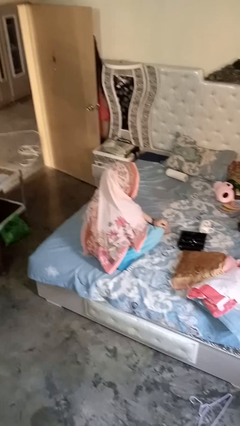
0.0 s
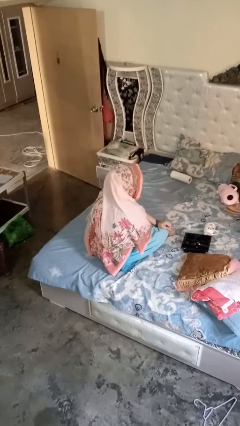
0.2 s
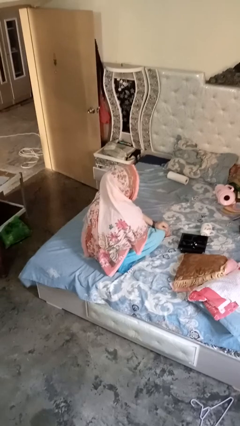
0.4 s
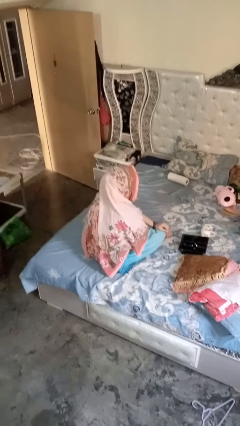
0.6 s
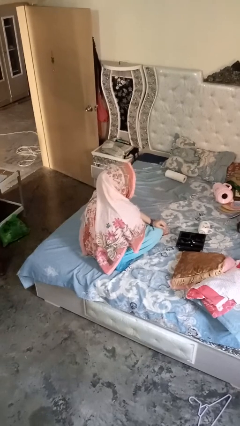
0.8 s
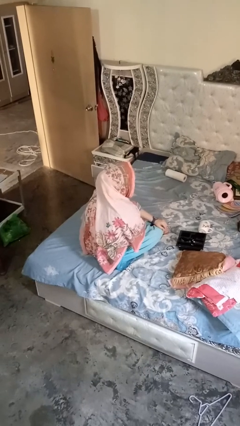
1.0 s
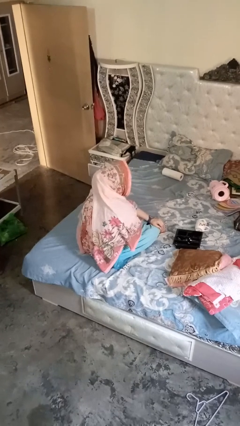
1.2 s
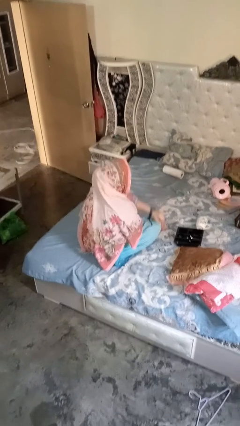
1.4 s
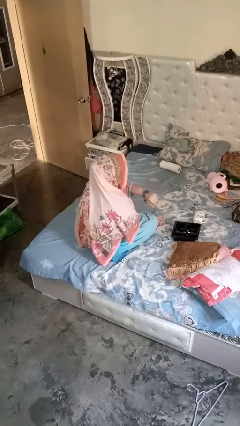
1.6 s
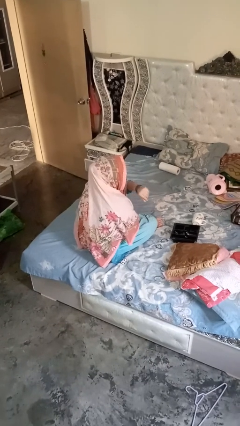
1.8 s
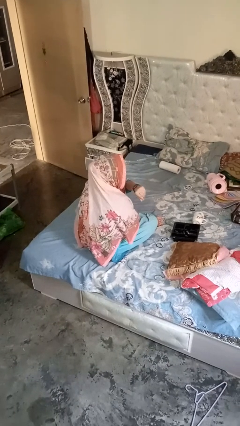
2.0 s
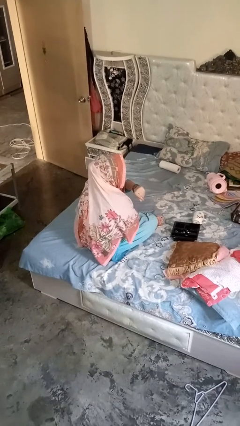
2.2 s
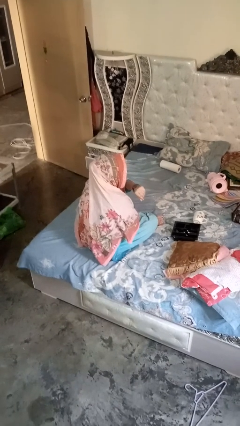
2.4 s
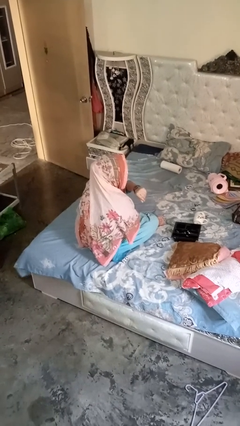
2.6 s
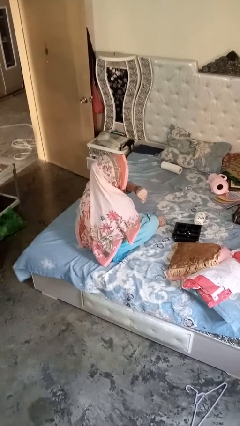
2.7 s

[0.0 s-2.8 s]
person gestures watch closely

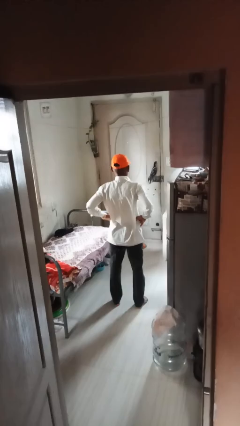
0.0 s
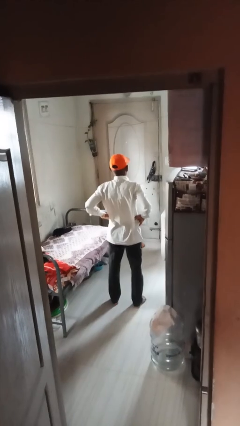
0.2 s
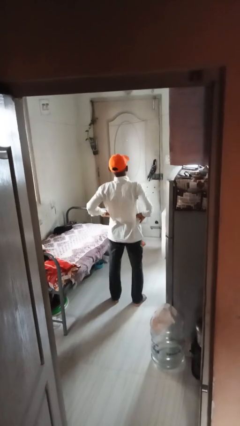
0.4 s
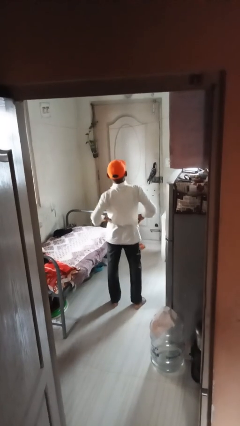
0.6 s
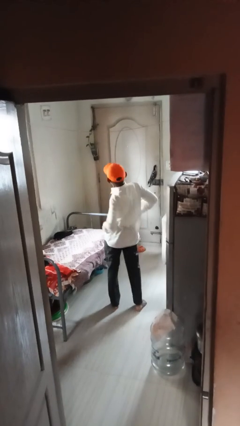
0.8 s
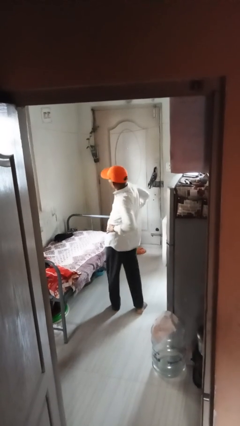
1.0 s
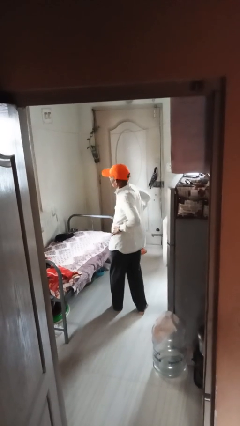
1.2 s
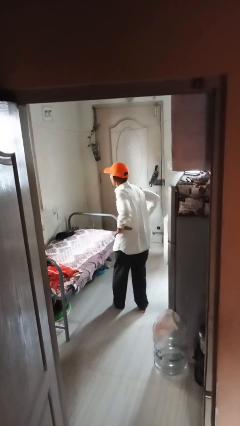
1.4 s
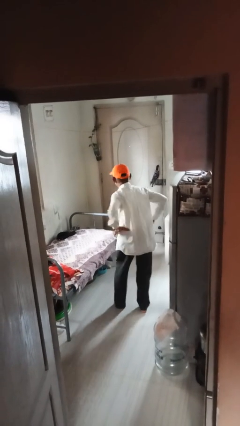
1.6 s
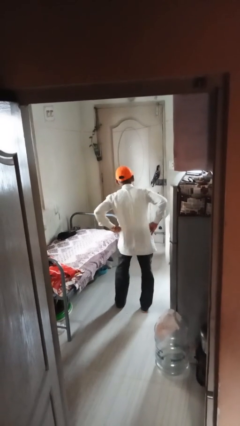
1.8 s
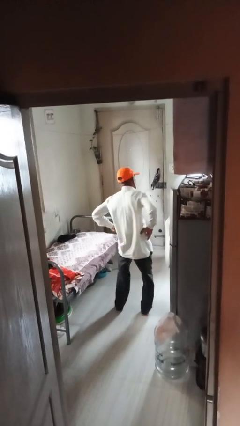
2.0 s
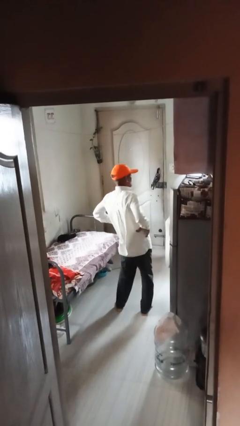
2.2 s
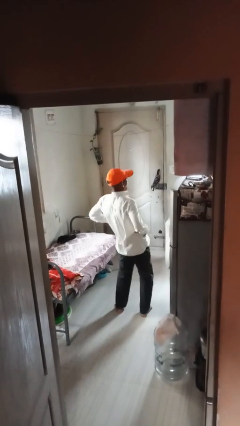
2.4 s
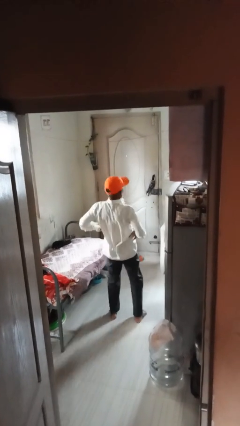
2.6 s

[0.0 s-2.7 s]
person wiggles hips

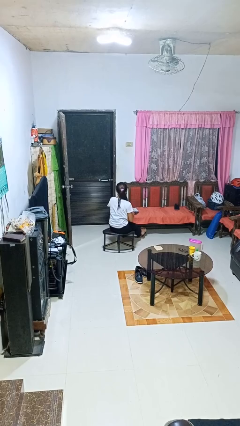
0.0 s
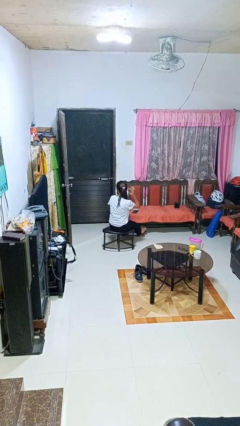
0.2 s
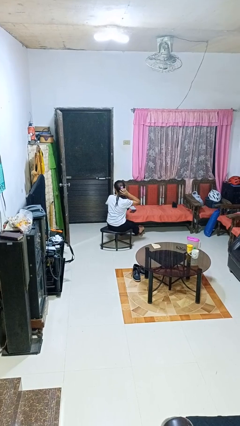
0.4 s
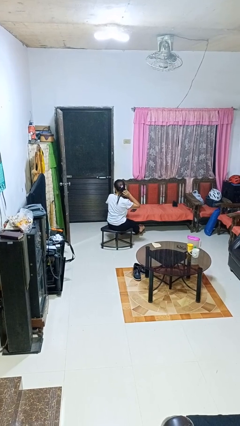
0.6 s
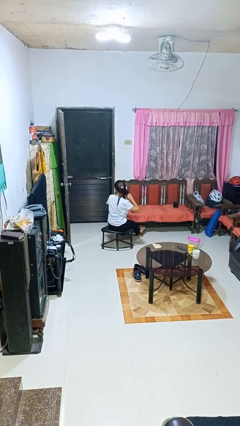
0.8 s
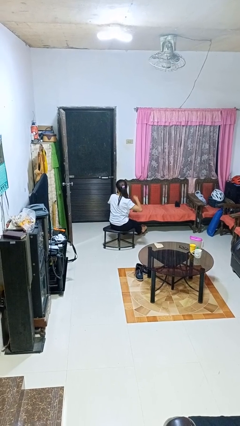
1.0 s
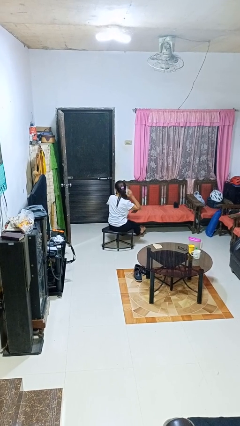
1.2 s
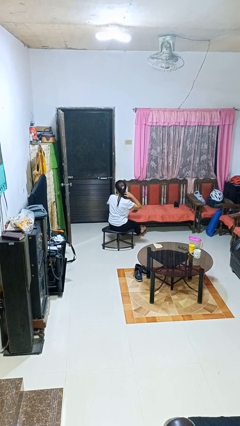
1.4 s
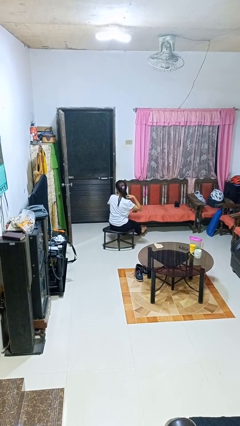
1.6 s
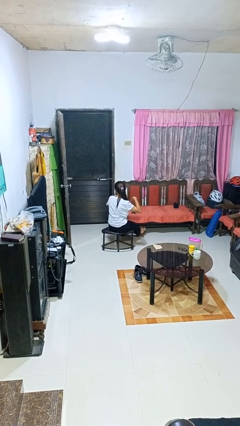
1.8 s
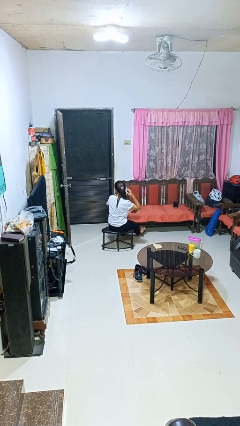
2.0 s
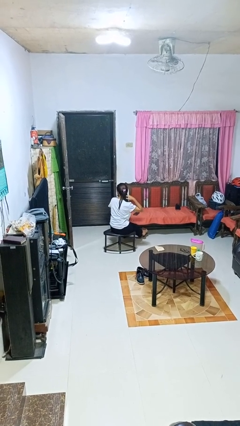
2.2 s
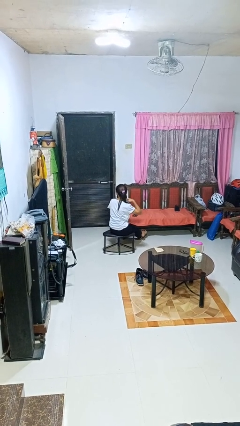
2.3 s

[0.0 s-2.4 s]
person strokes hair

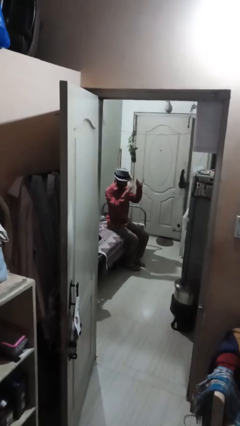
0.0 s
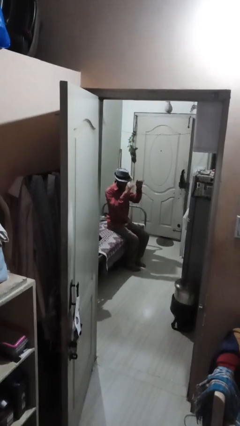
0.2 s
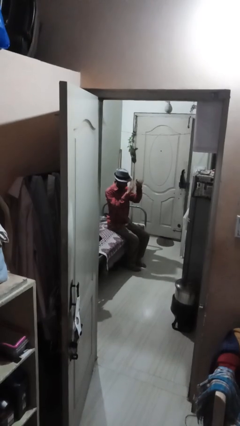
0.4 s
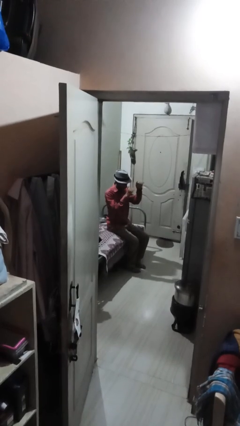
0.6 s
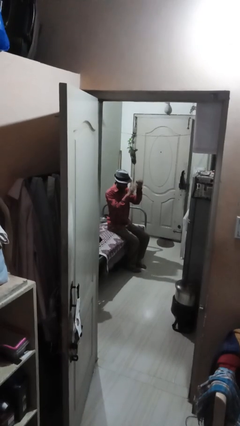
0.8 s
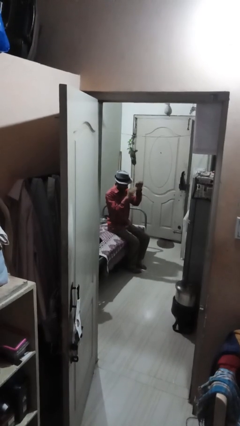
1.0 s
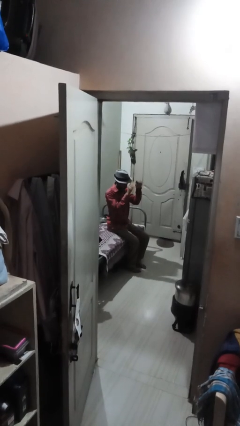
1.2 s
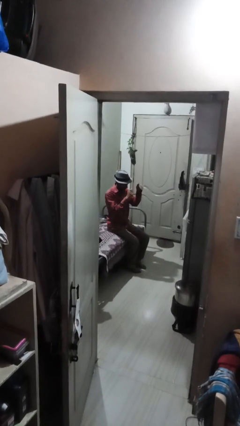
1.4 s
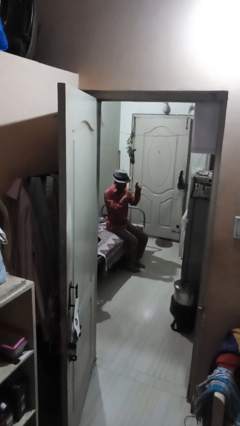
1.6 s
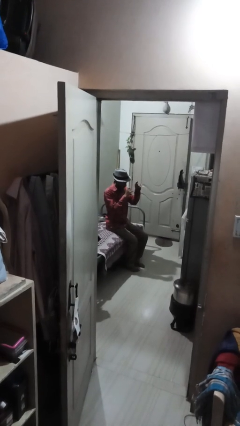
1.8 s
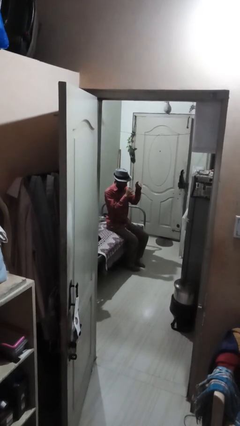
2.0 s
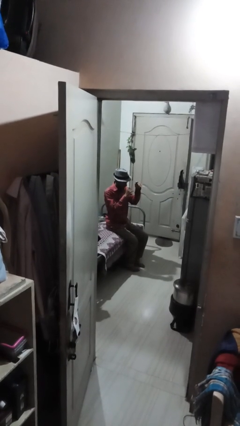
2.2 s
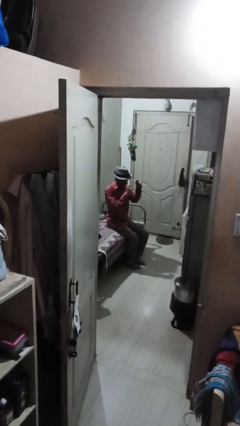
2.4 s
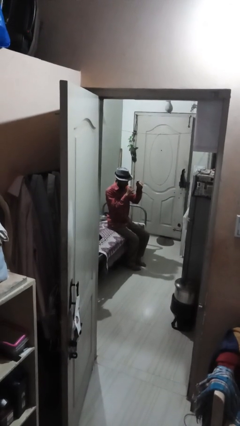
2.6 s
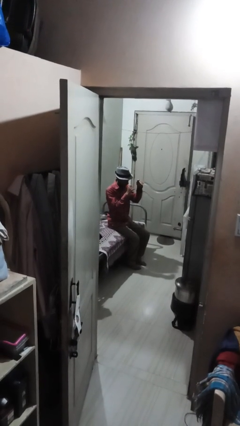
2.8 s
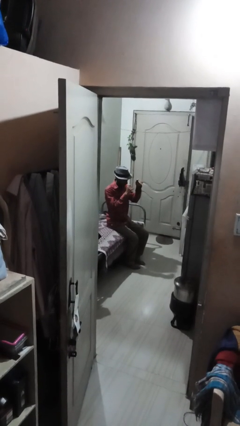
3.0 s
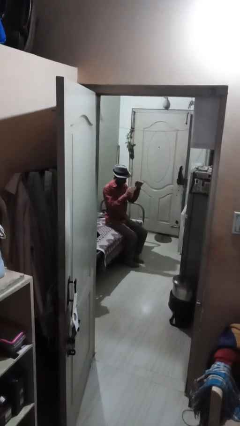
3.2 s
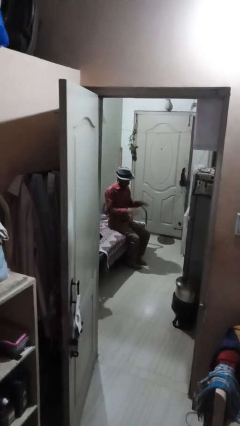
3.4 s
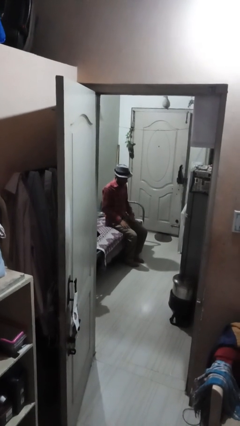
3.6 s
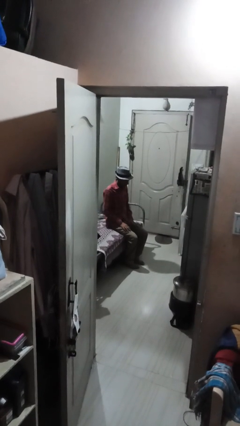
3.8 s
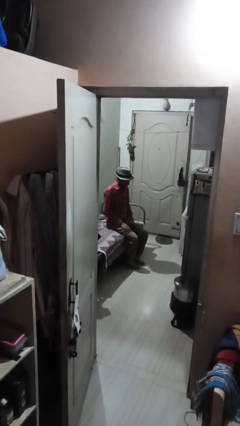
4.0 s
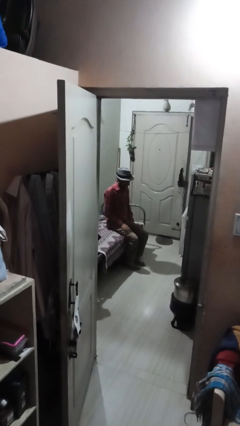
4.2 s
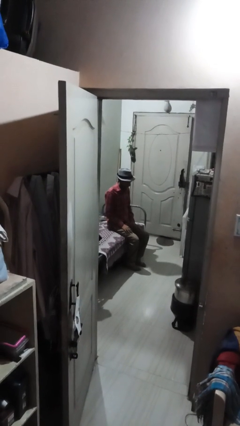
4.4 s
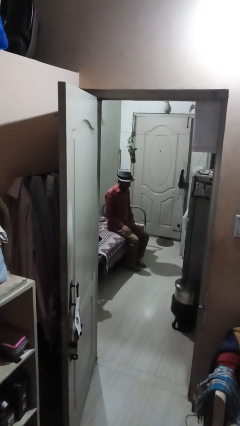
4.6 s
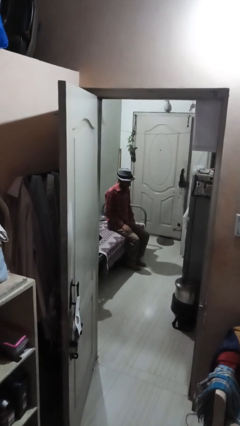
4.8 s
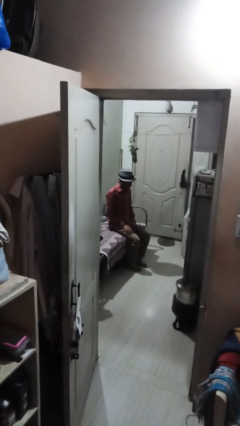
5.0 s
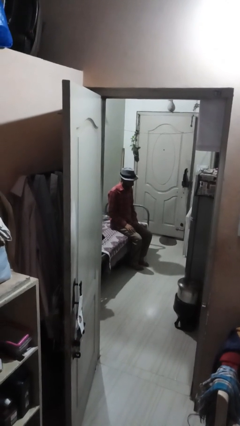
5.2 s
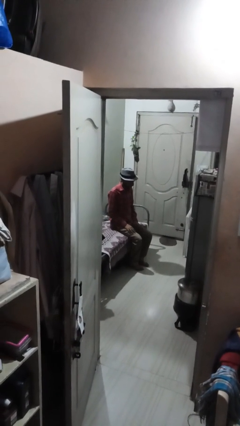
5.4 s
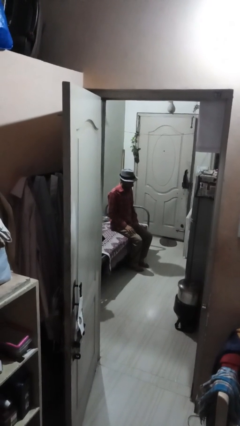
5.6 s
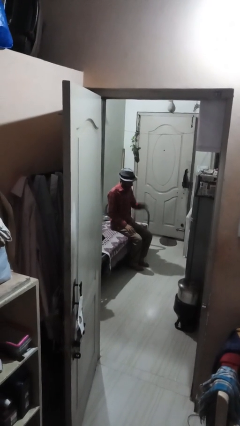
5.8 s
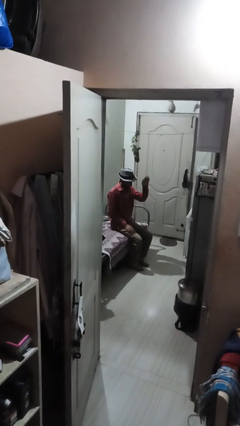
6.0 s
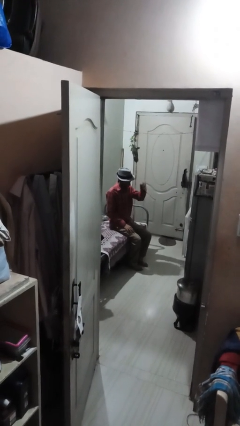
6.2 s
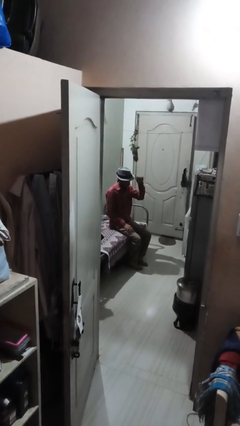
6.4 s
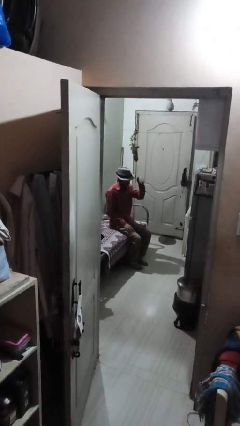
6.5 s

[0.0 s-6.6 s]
person gestures come here

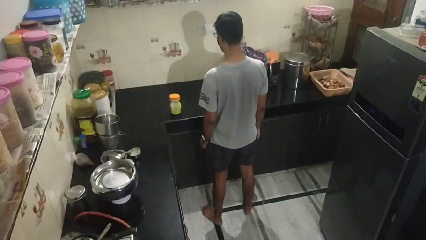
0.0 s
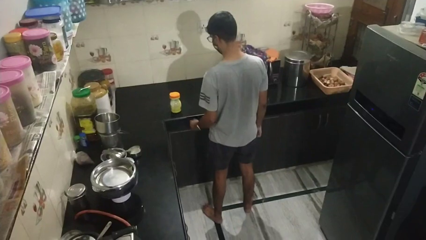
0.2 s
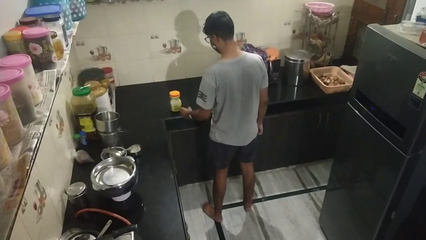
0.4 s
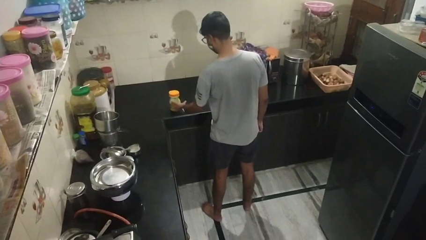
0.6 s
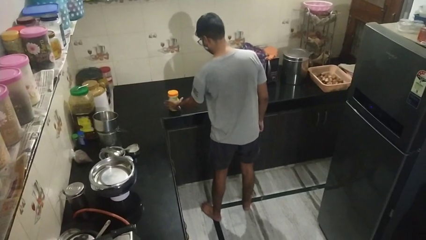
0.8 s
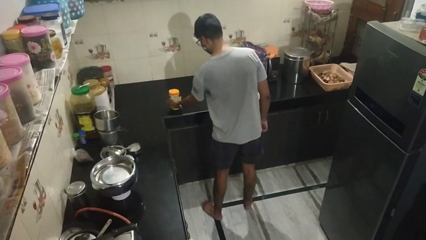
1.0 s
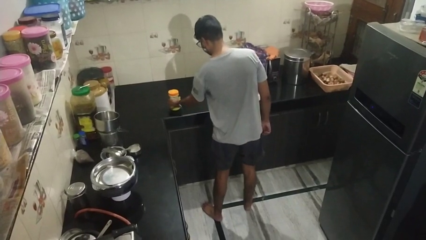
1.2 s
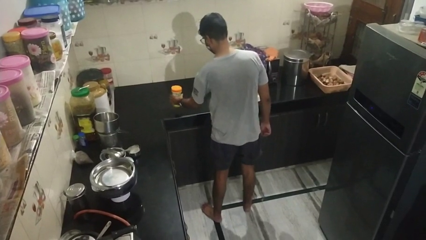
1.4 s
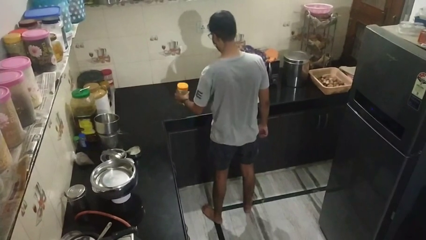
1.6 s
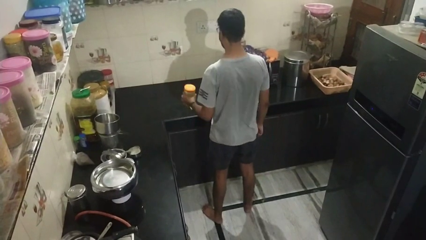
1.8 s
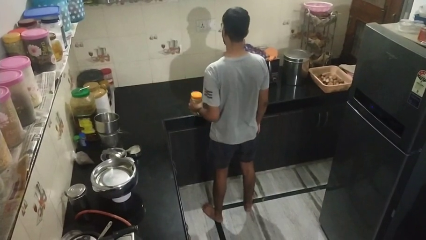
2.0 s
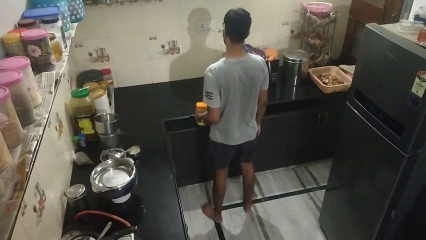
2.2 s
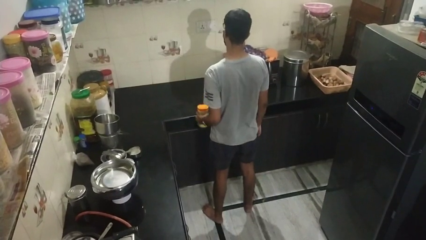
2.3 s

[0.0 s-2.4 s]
person picks up object from countertop

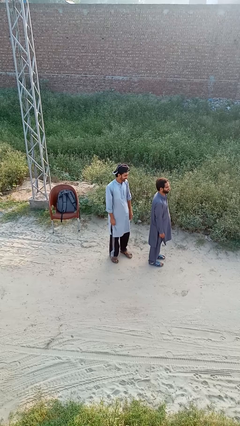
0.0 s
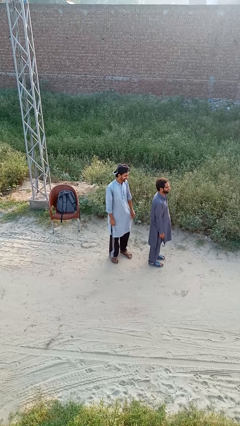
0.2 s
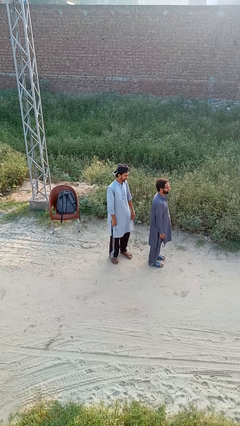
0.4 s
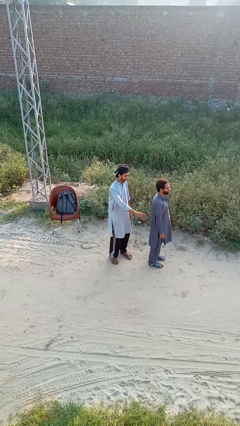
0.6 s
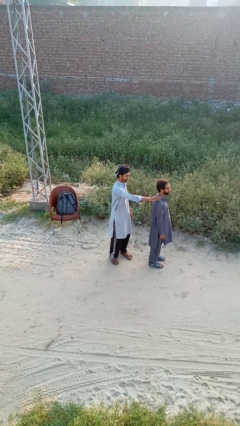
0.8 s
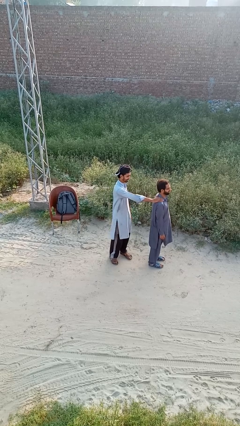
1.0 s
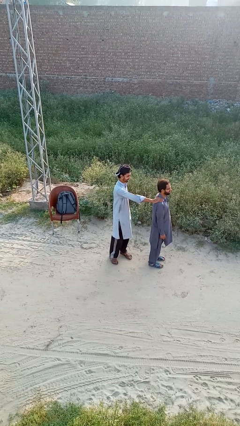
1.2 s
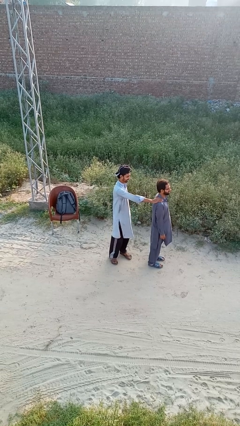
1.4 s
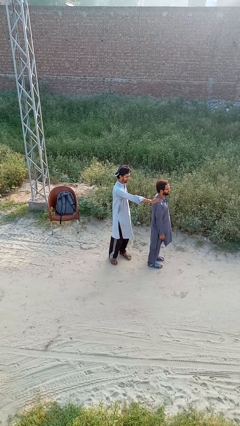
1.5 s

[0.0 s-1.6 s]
person grabs person by shoulder
